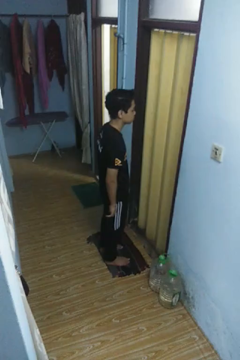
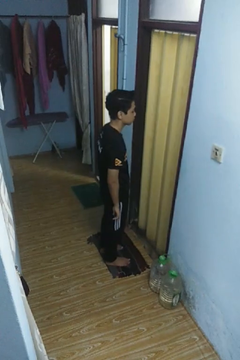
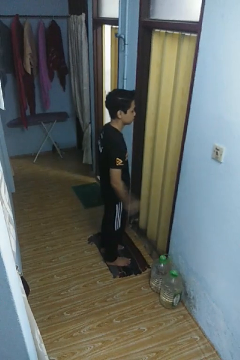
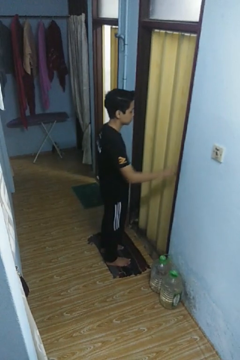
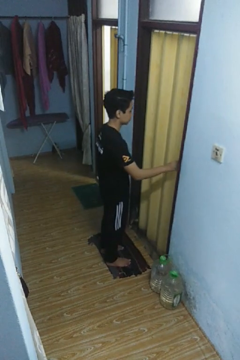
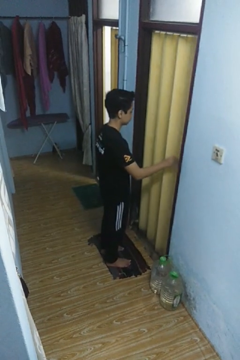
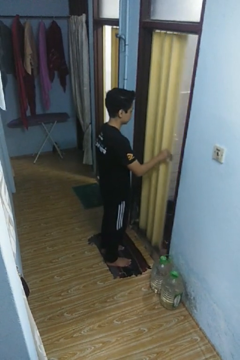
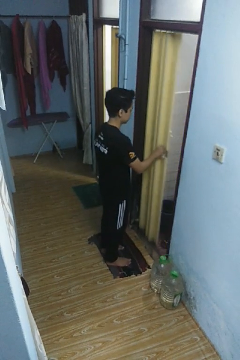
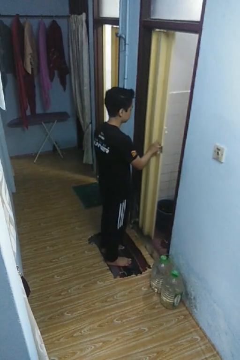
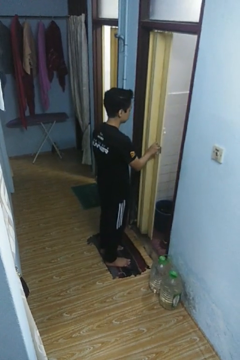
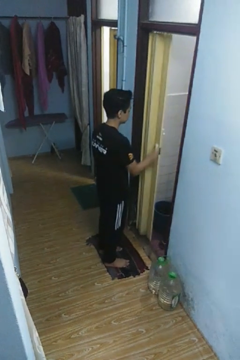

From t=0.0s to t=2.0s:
person opens sliding door

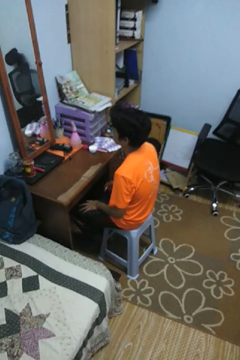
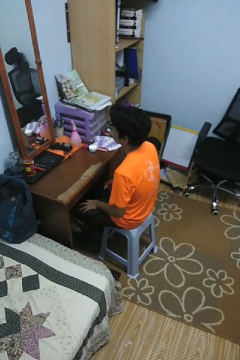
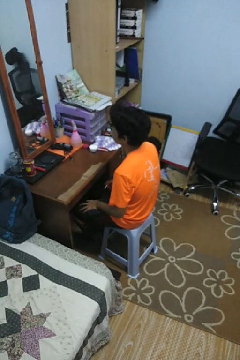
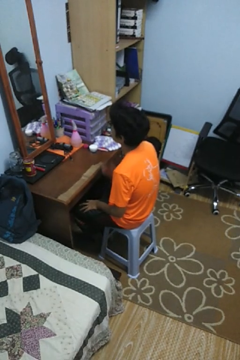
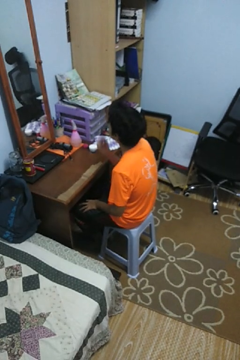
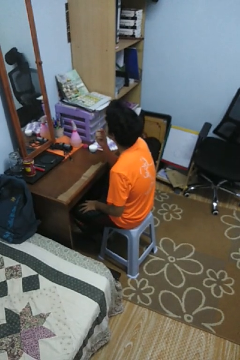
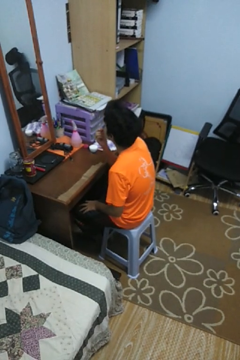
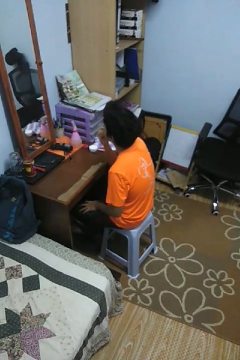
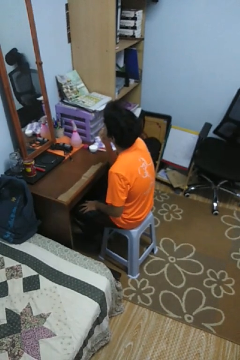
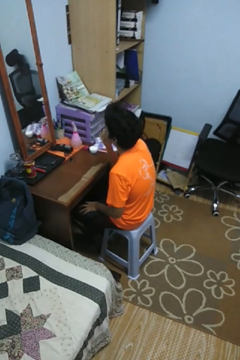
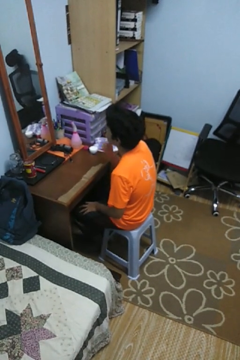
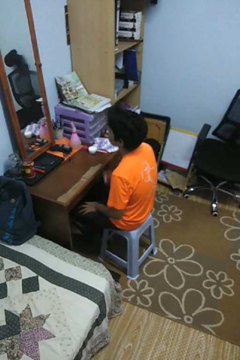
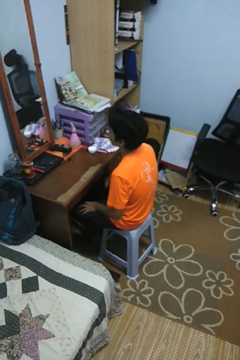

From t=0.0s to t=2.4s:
person applies lip makeup

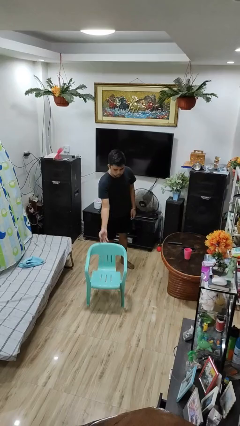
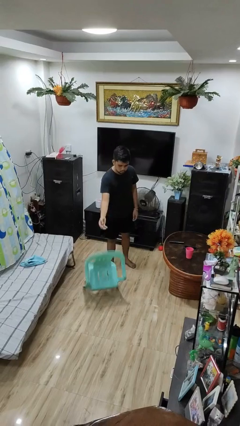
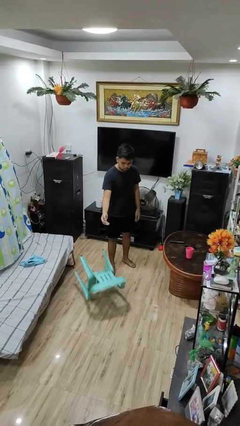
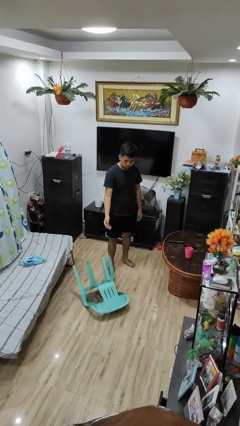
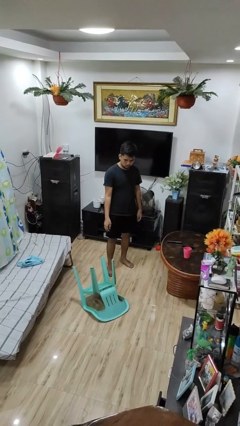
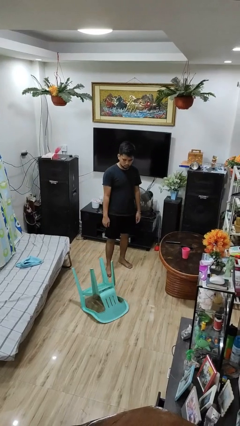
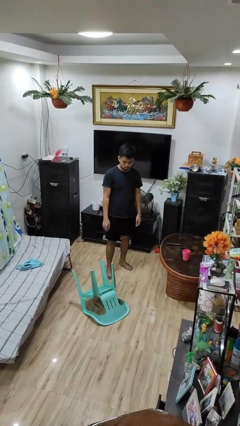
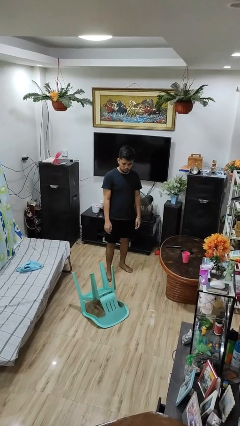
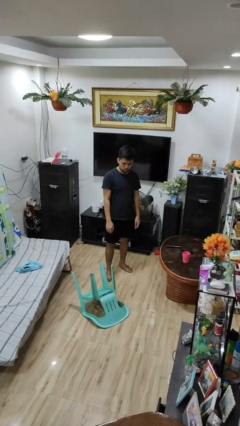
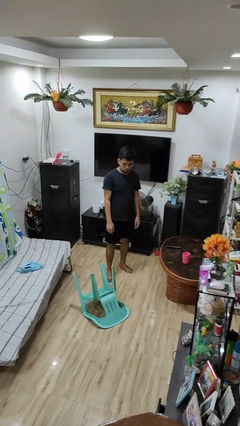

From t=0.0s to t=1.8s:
person knocks over furniture

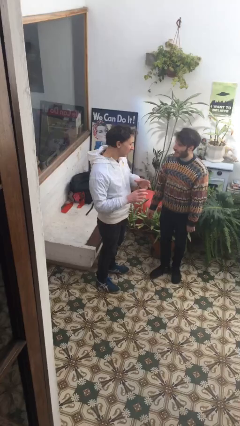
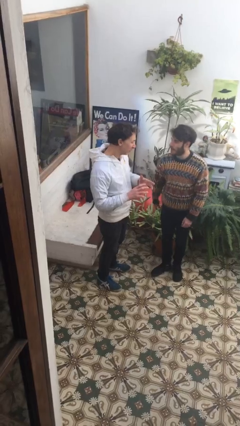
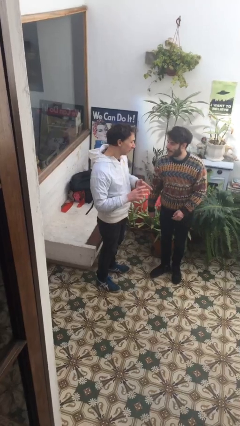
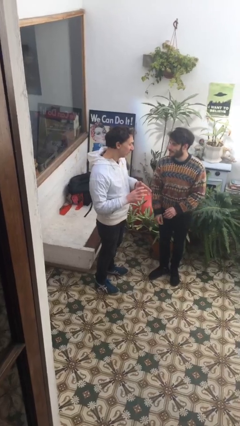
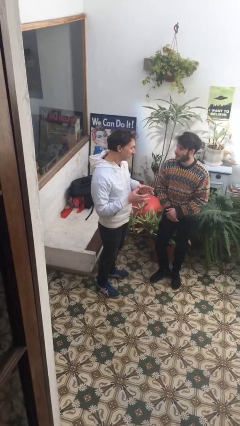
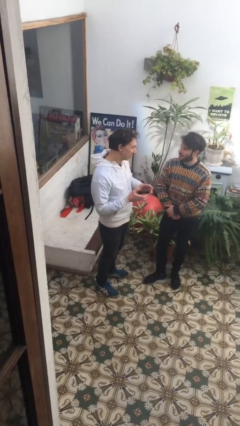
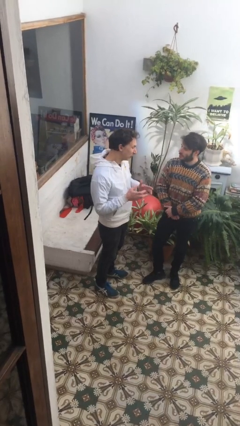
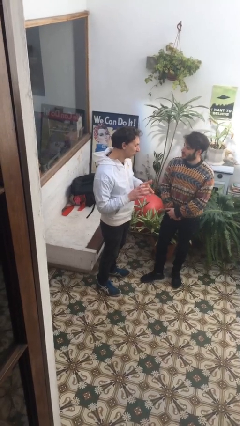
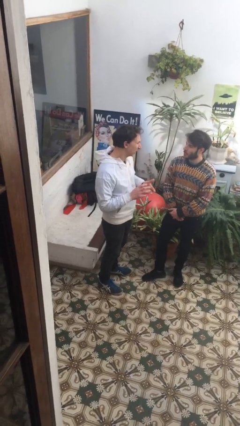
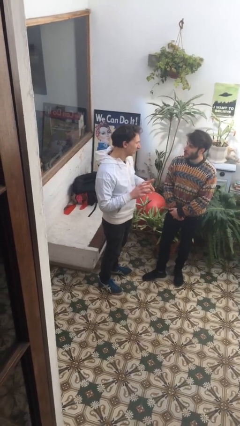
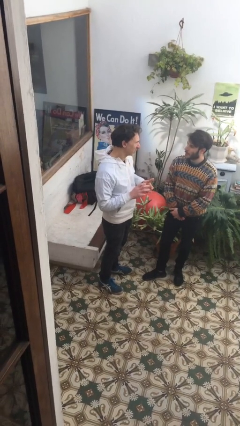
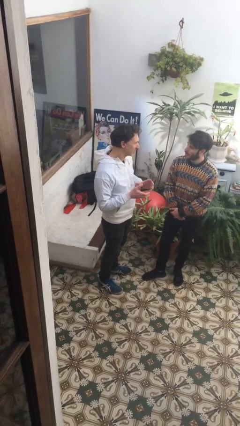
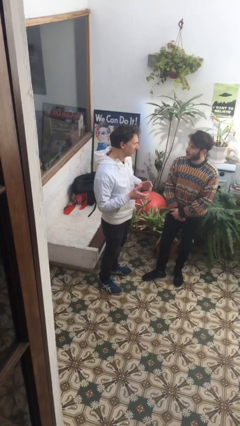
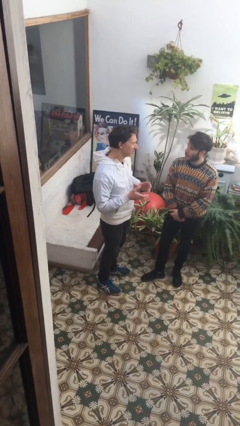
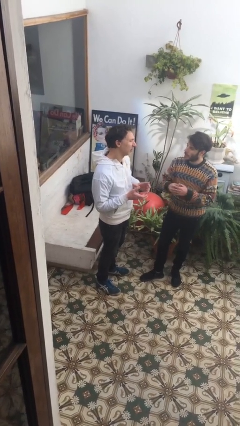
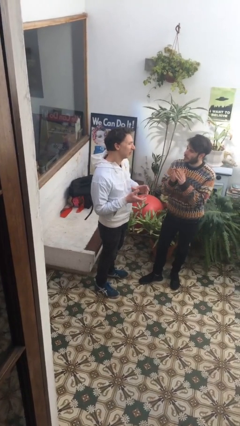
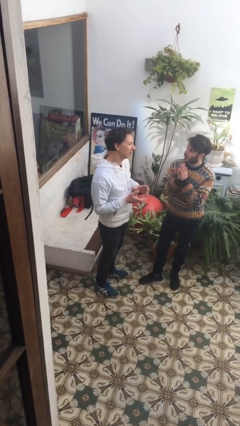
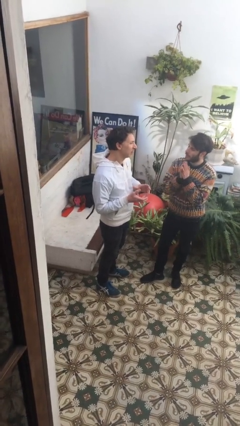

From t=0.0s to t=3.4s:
person talks to person

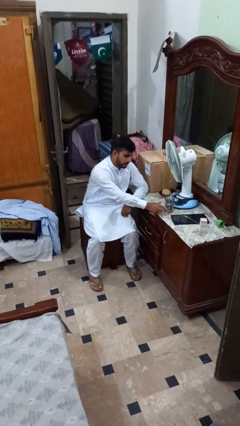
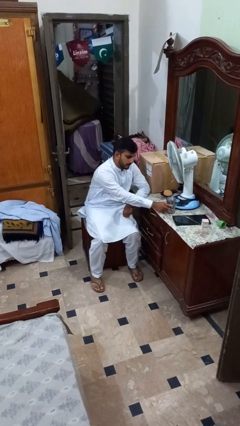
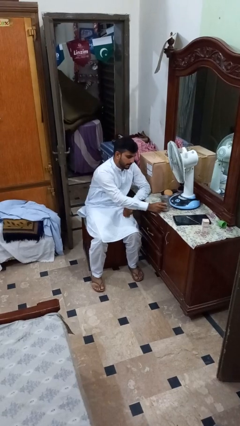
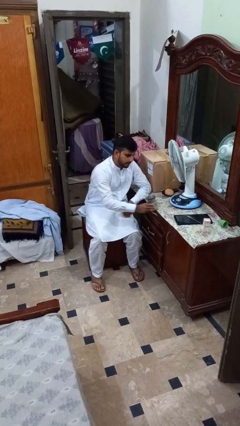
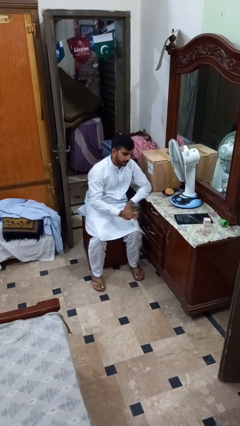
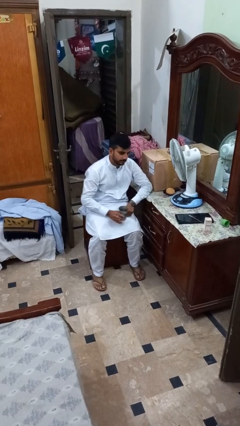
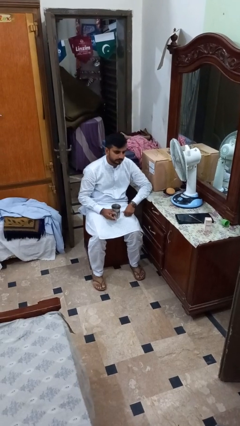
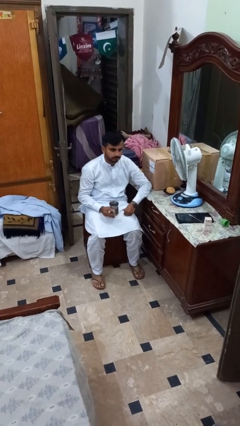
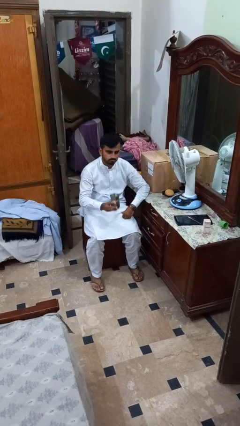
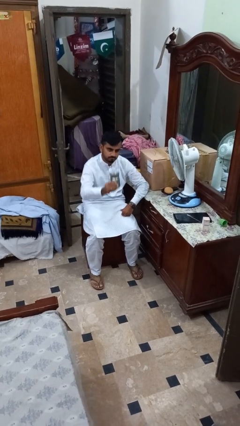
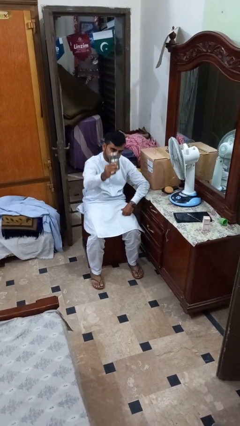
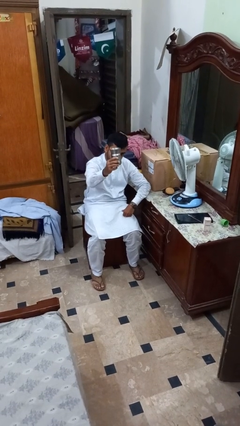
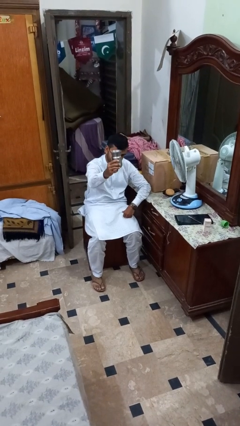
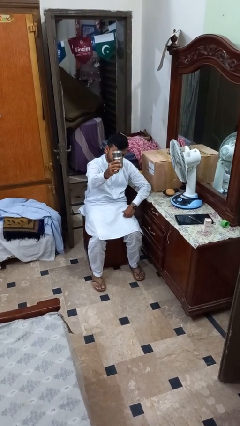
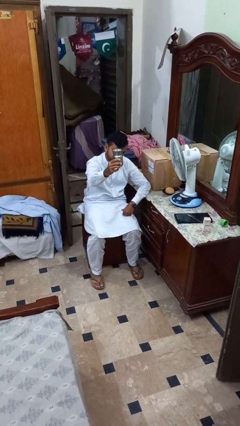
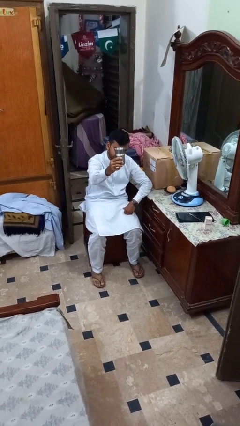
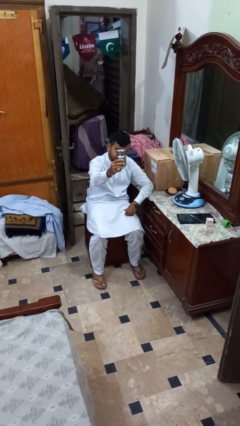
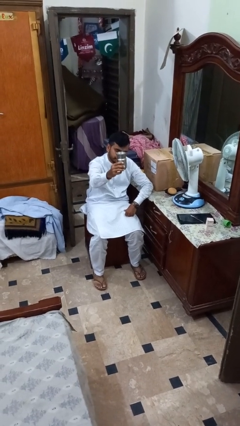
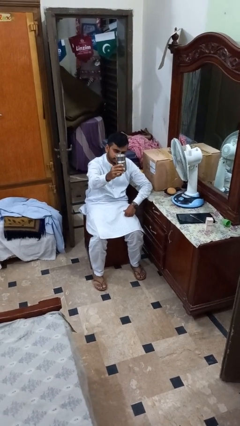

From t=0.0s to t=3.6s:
person picks up object from table

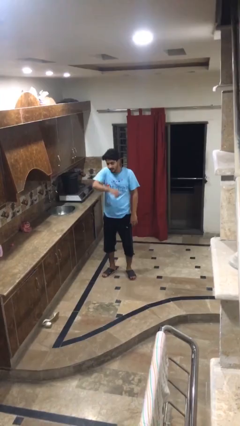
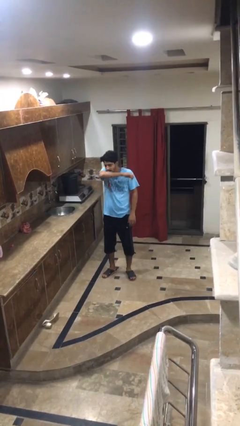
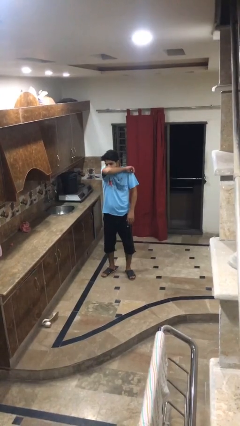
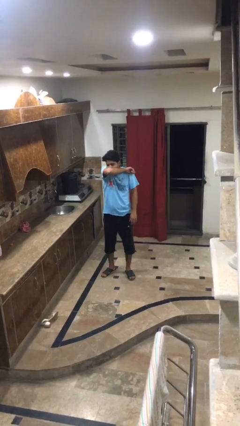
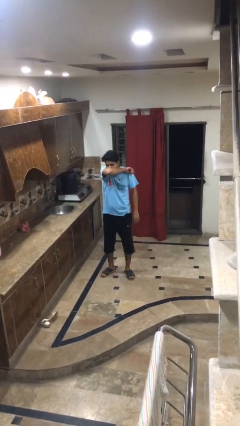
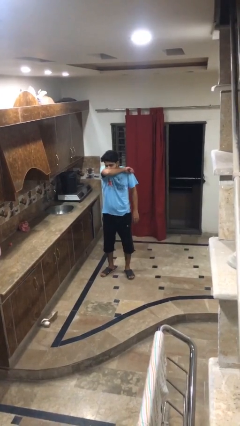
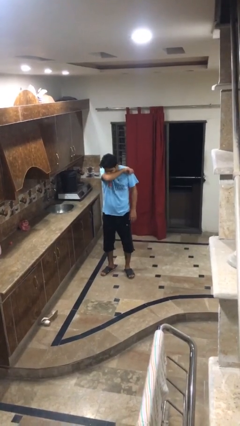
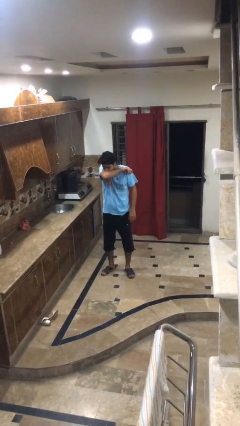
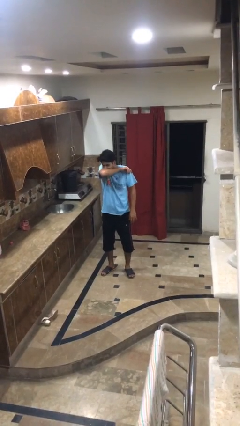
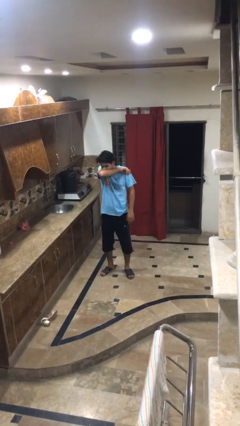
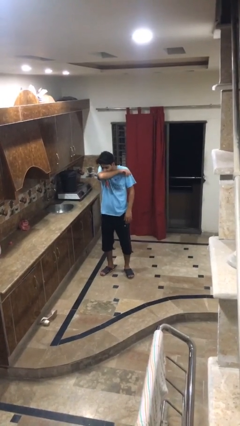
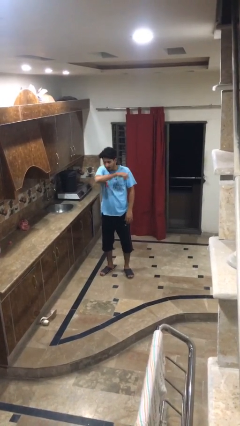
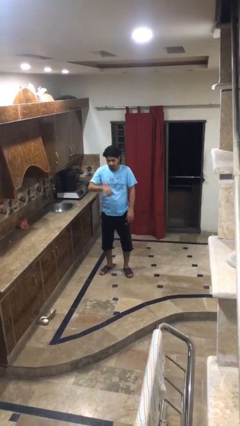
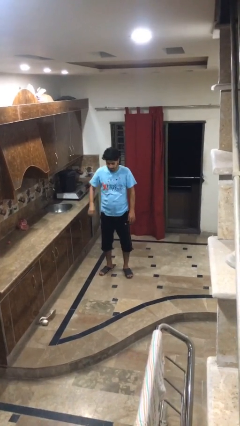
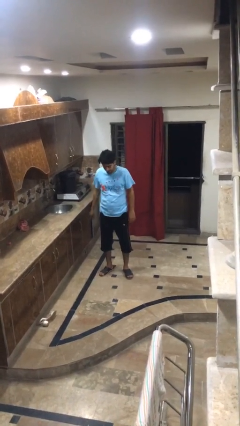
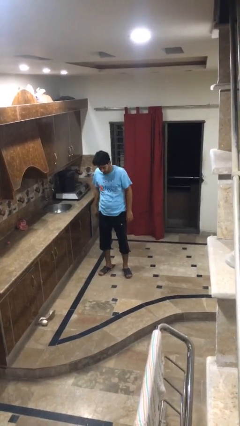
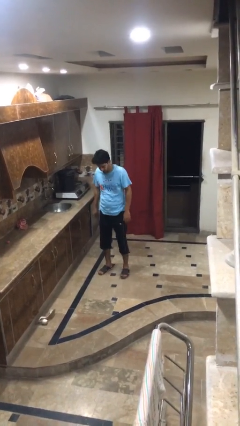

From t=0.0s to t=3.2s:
person sneezes into arm

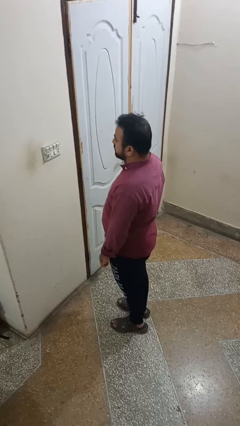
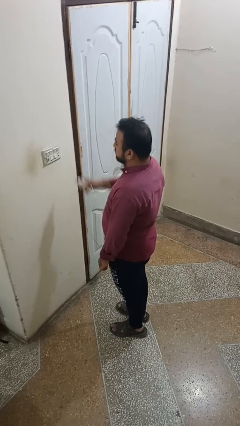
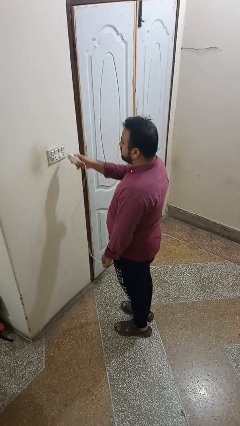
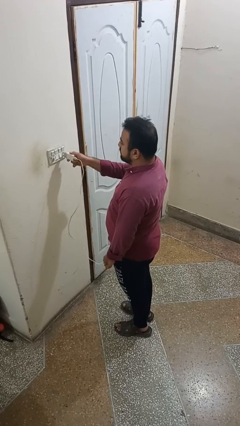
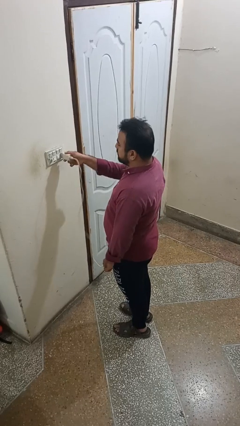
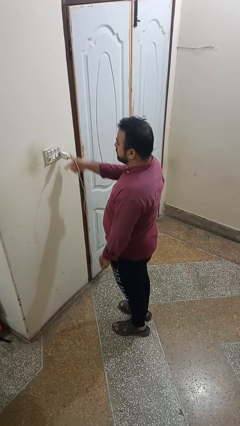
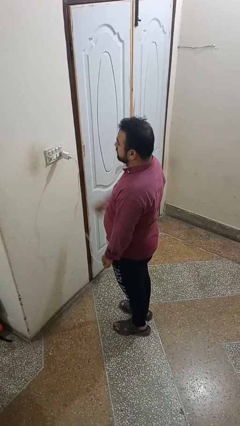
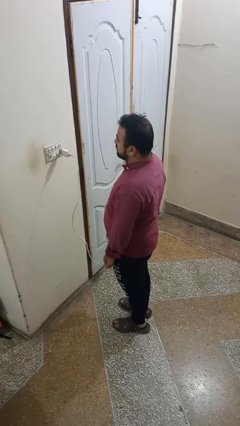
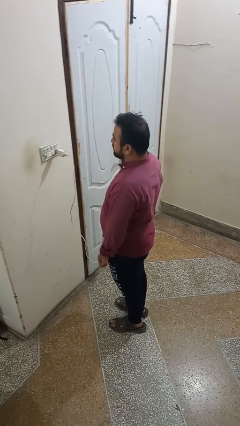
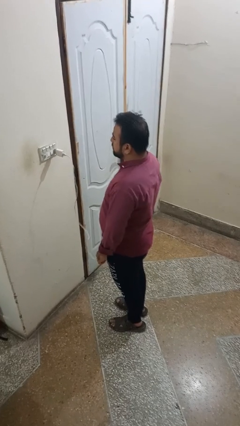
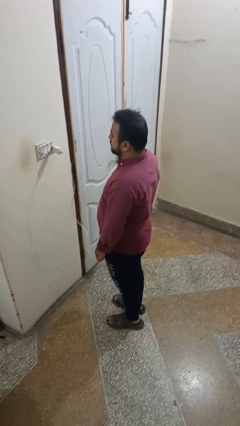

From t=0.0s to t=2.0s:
person plugs into electrical socket
